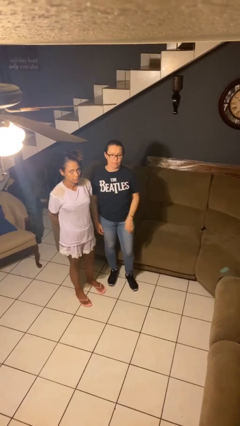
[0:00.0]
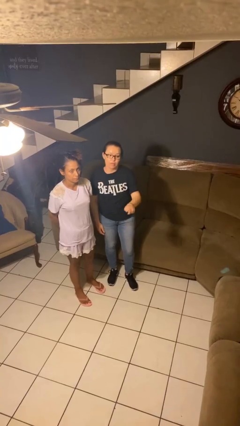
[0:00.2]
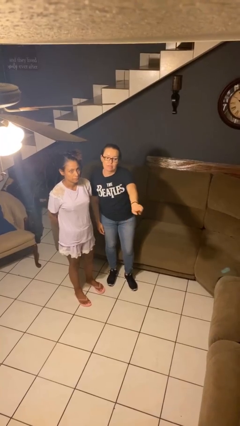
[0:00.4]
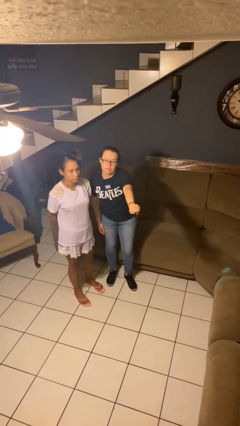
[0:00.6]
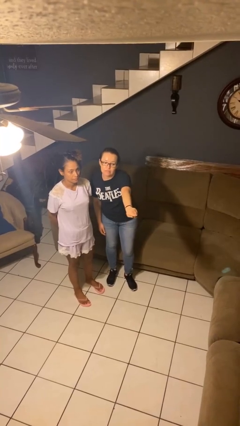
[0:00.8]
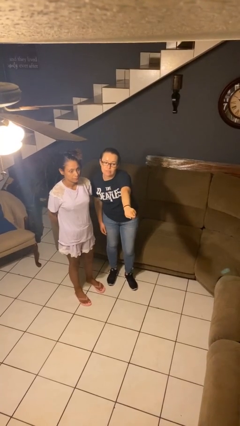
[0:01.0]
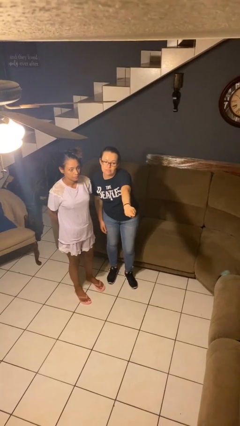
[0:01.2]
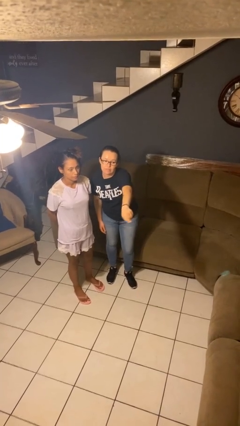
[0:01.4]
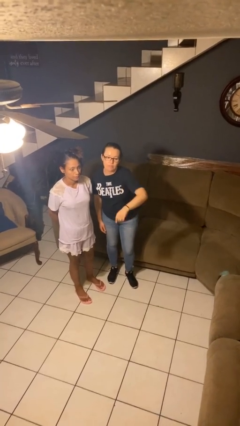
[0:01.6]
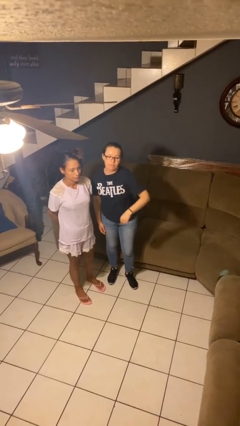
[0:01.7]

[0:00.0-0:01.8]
person points at person

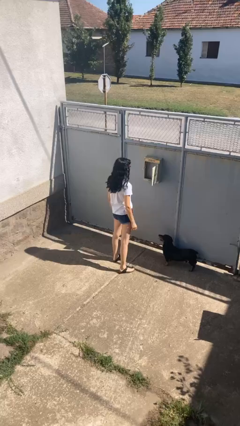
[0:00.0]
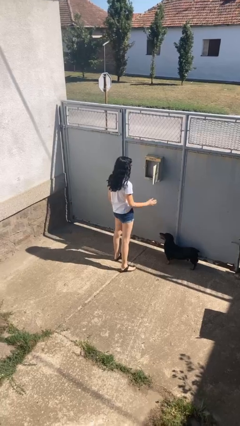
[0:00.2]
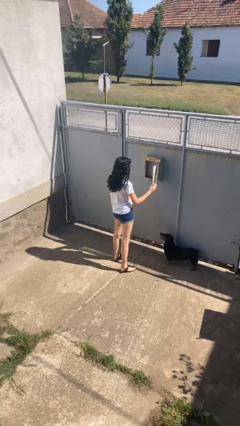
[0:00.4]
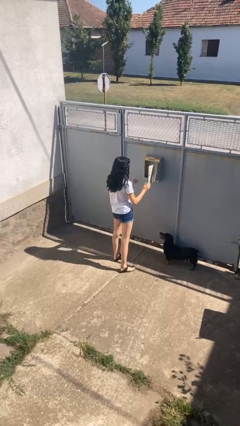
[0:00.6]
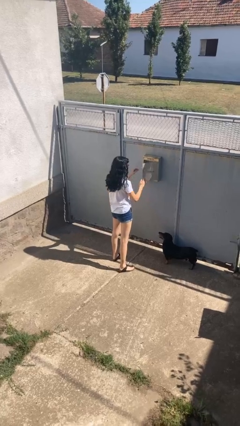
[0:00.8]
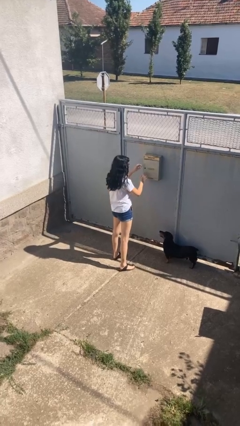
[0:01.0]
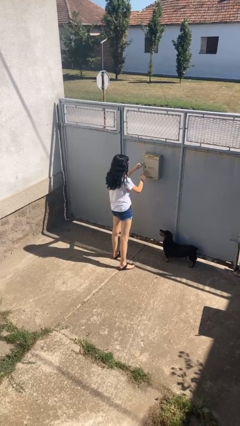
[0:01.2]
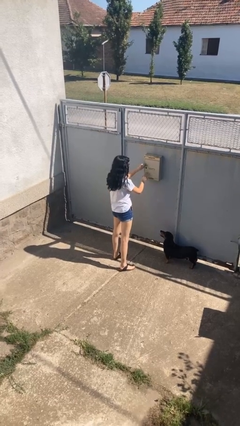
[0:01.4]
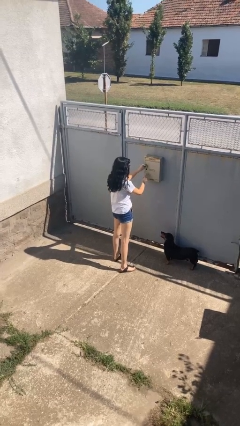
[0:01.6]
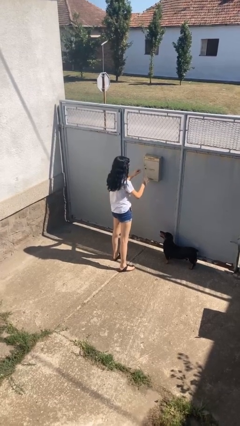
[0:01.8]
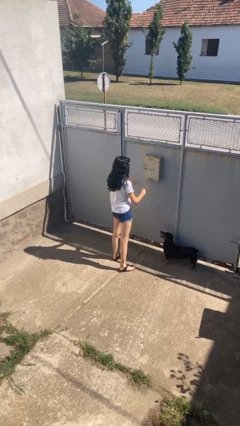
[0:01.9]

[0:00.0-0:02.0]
person closes mailbox

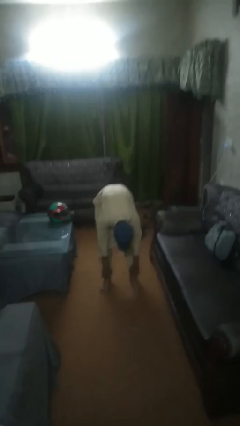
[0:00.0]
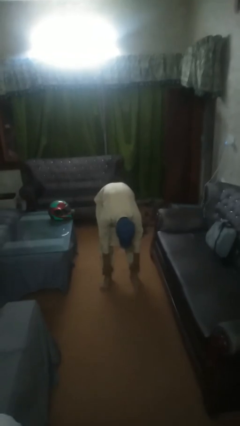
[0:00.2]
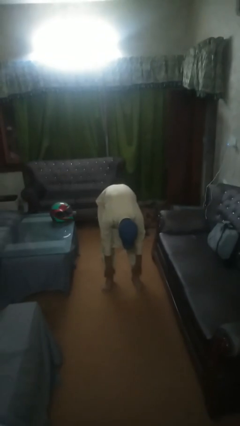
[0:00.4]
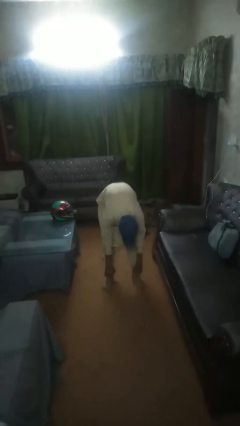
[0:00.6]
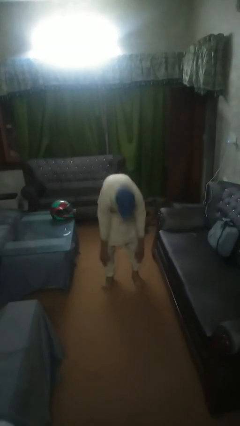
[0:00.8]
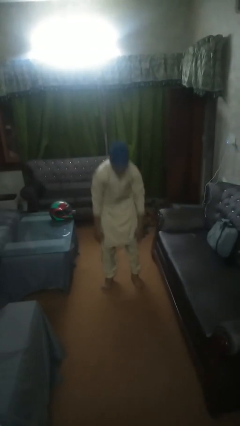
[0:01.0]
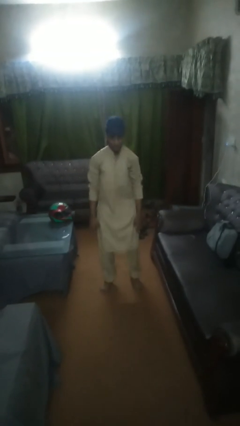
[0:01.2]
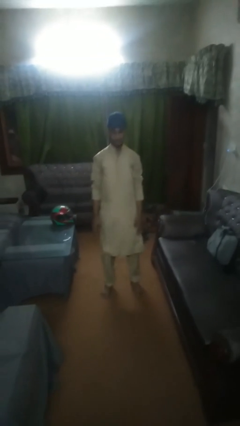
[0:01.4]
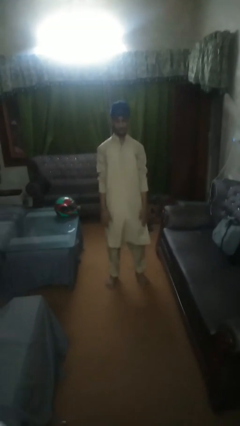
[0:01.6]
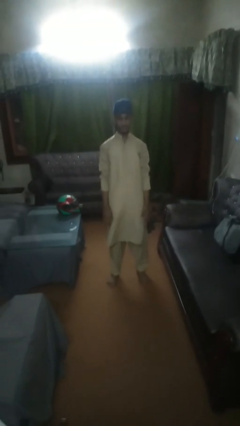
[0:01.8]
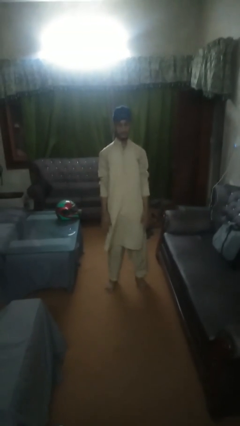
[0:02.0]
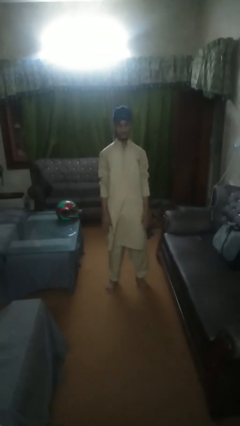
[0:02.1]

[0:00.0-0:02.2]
person stands up from floor

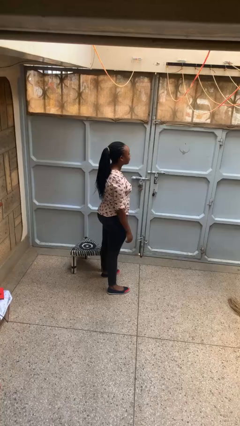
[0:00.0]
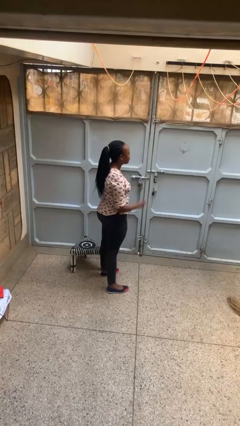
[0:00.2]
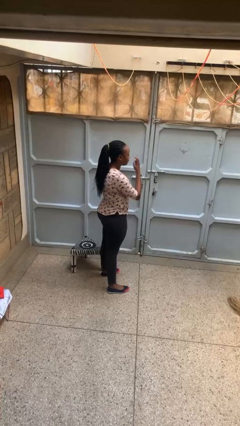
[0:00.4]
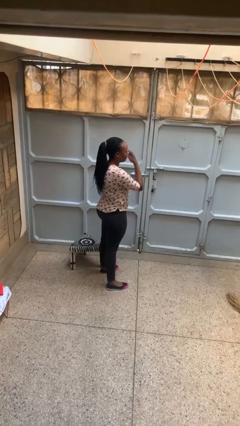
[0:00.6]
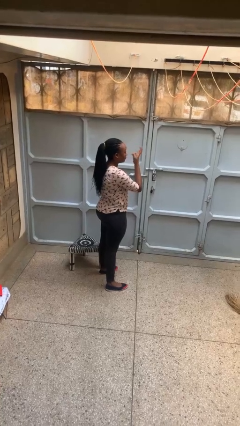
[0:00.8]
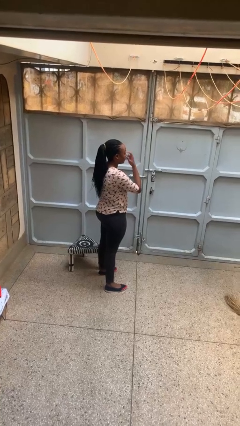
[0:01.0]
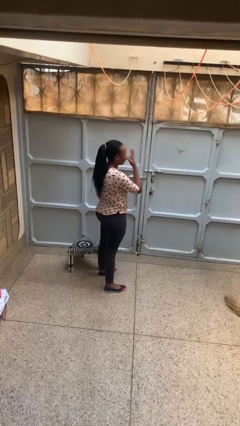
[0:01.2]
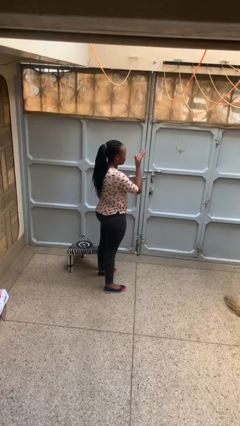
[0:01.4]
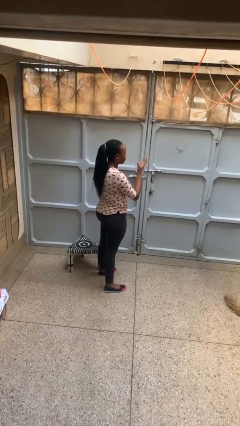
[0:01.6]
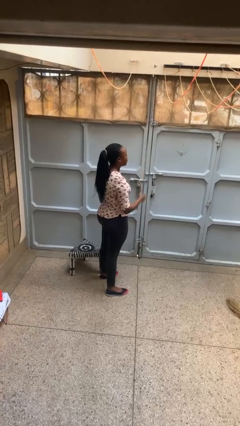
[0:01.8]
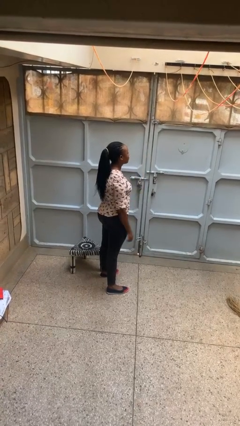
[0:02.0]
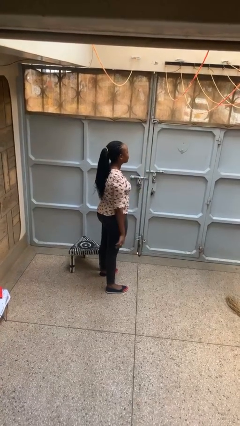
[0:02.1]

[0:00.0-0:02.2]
person gestures watch closely

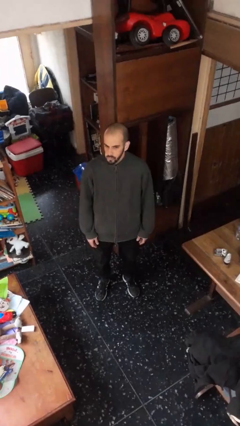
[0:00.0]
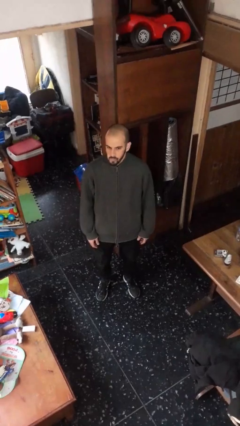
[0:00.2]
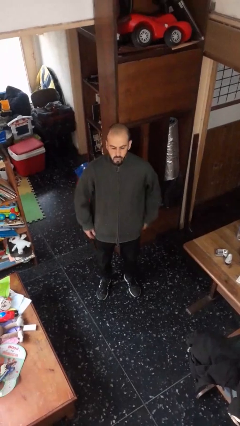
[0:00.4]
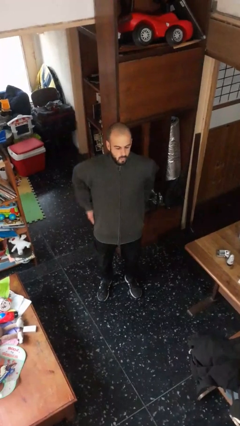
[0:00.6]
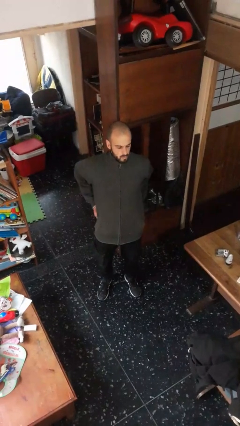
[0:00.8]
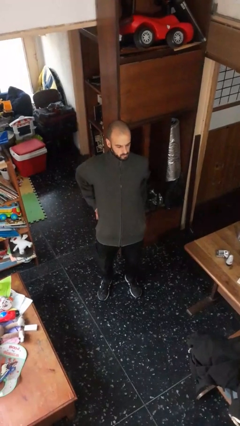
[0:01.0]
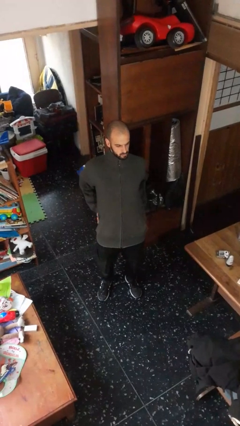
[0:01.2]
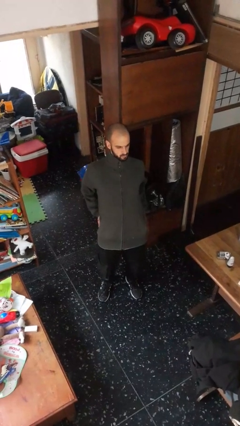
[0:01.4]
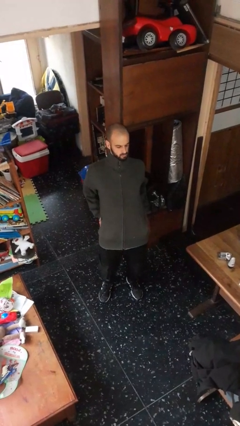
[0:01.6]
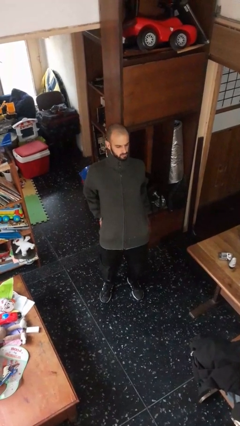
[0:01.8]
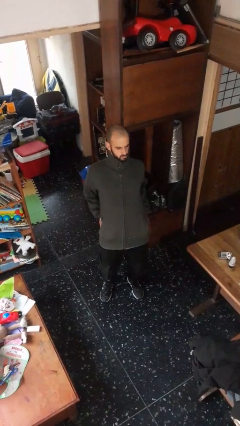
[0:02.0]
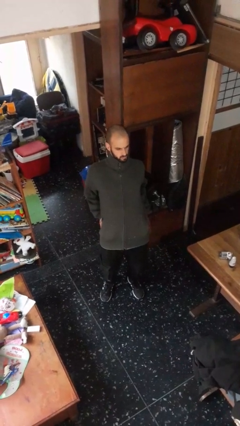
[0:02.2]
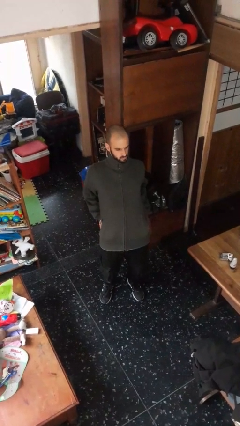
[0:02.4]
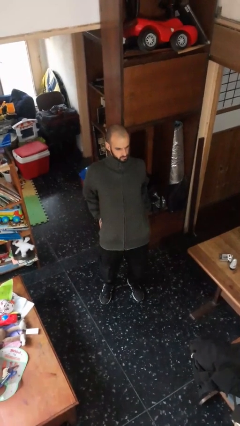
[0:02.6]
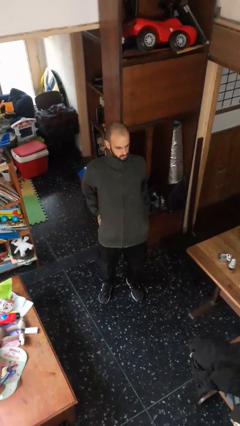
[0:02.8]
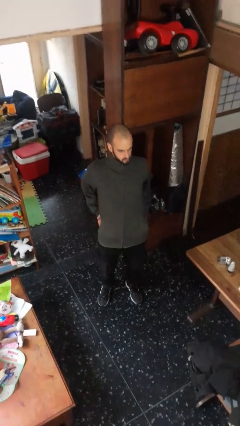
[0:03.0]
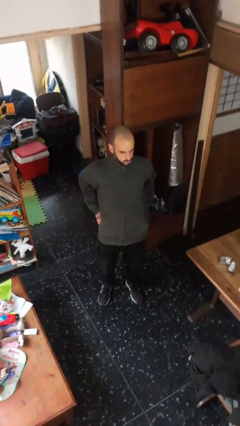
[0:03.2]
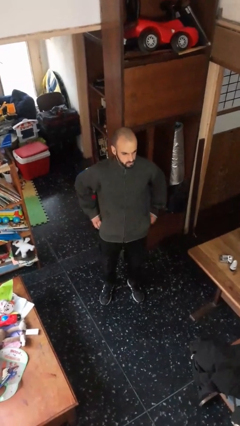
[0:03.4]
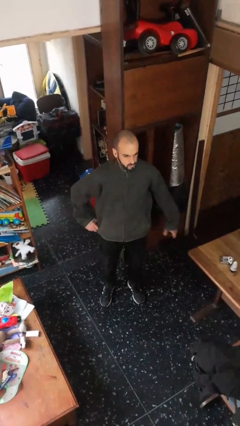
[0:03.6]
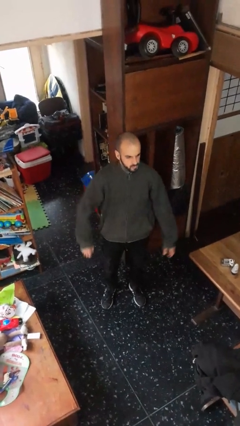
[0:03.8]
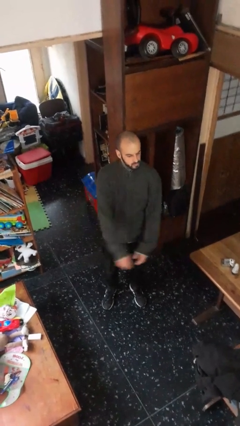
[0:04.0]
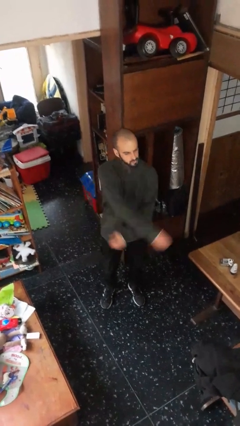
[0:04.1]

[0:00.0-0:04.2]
person stretches back

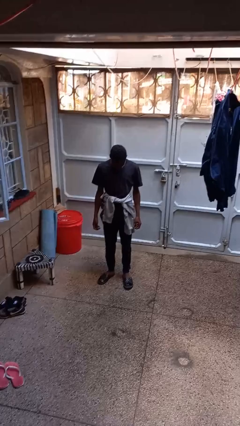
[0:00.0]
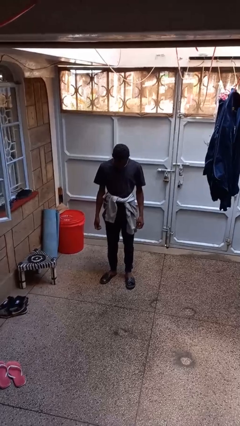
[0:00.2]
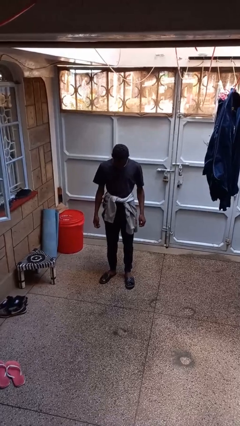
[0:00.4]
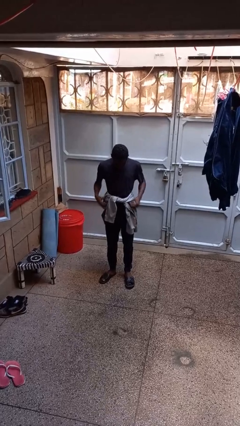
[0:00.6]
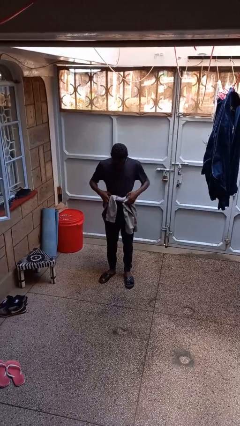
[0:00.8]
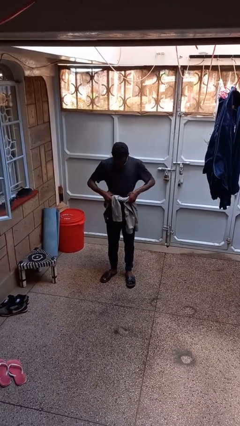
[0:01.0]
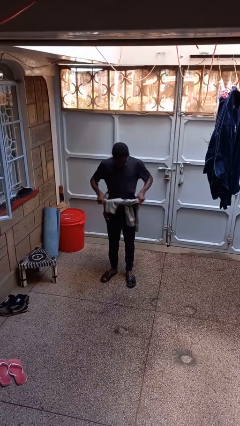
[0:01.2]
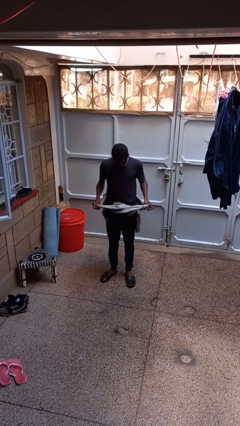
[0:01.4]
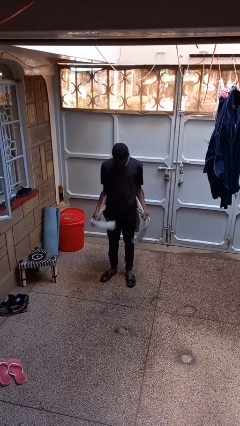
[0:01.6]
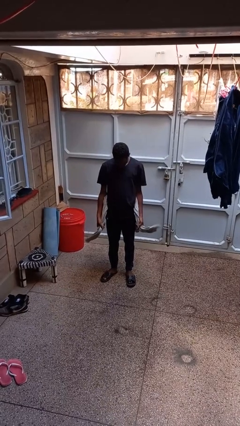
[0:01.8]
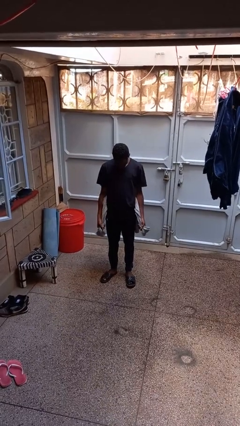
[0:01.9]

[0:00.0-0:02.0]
person unties jacket around waist

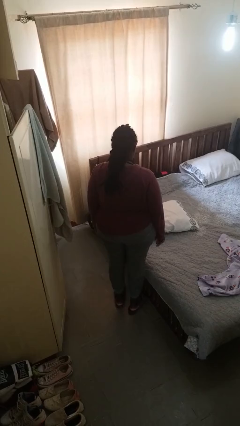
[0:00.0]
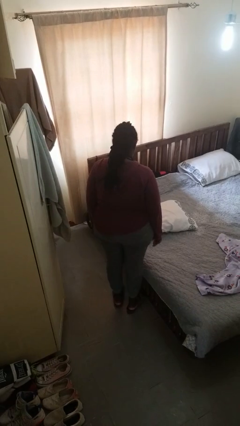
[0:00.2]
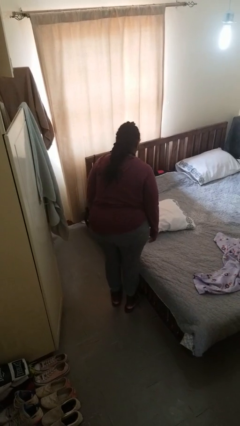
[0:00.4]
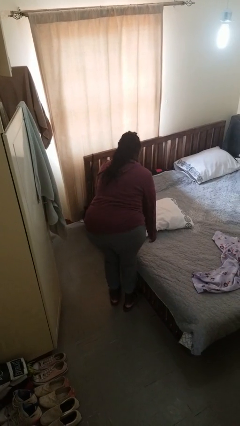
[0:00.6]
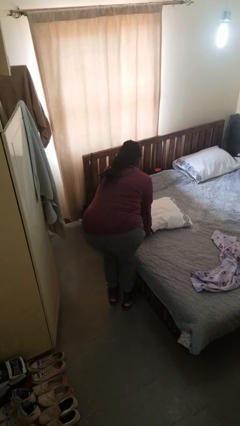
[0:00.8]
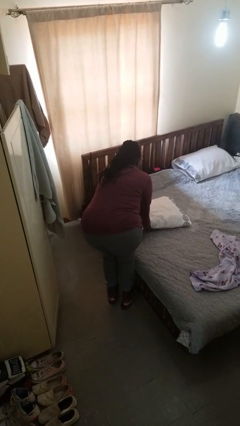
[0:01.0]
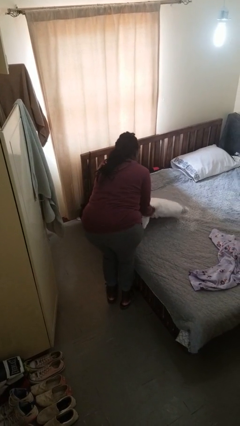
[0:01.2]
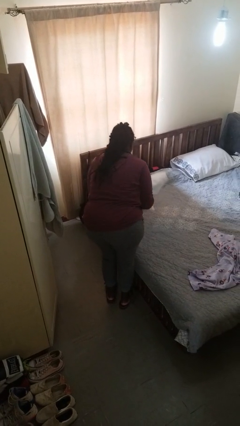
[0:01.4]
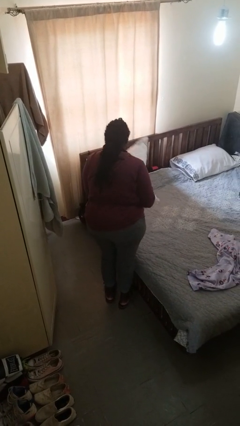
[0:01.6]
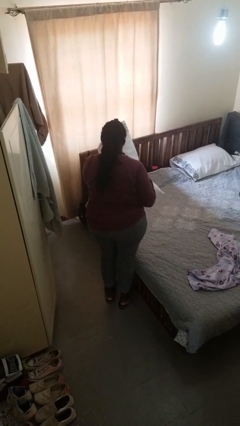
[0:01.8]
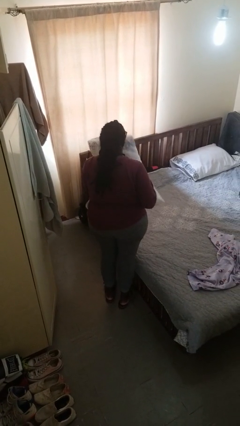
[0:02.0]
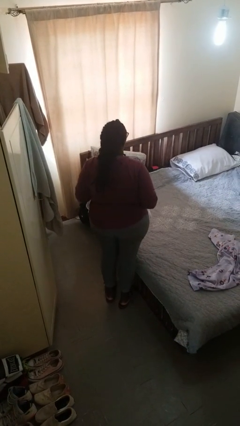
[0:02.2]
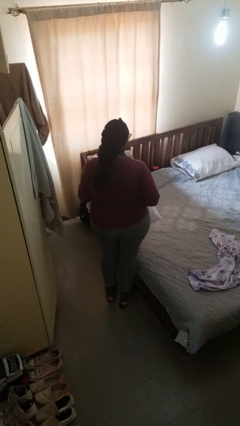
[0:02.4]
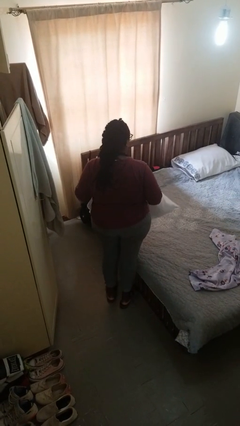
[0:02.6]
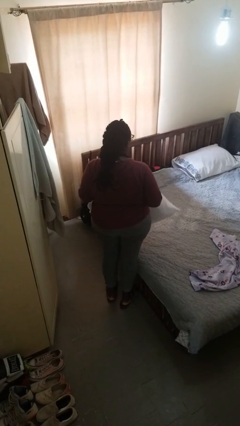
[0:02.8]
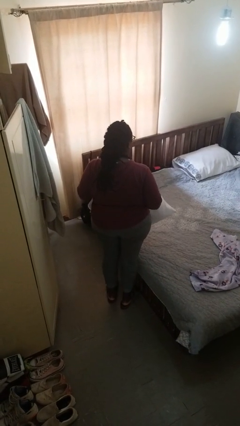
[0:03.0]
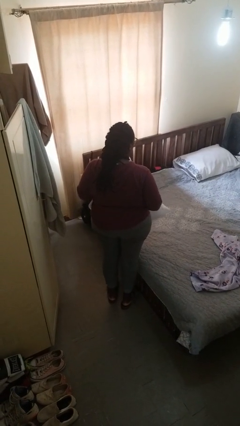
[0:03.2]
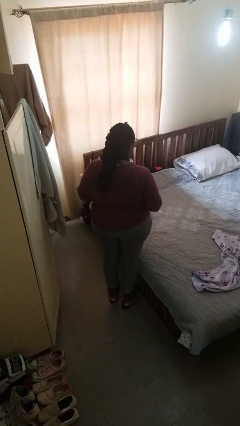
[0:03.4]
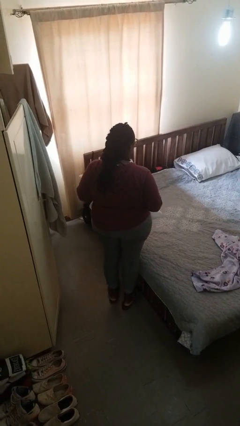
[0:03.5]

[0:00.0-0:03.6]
person picks up object from bed
